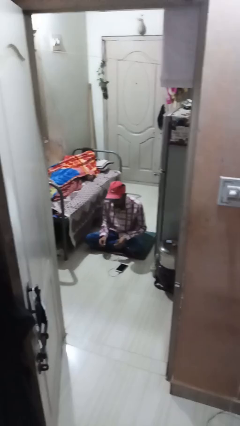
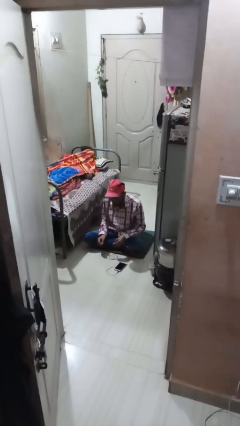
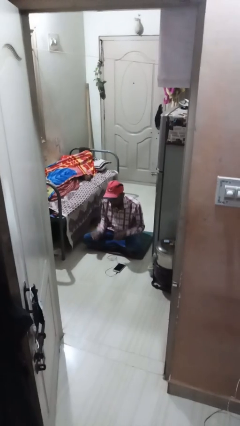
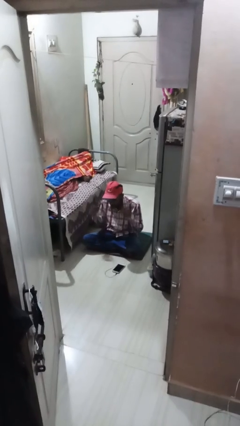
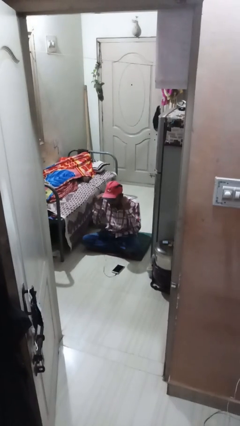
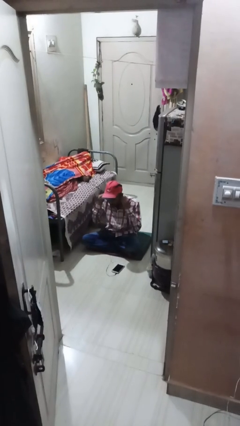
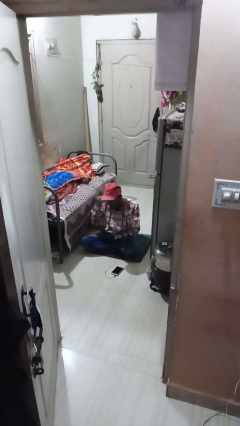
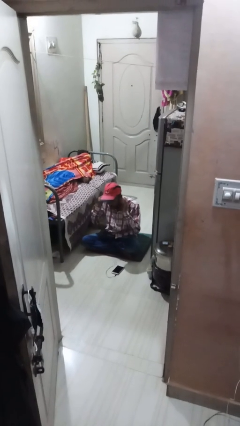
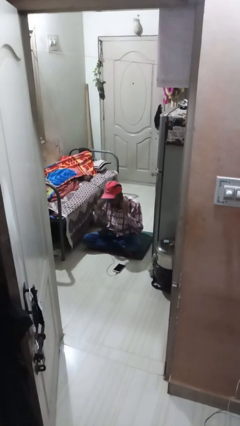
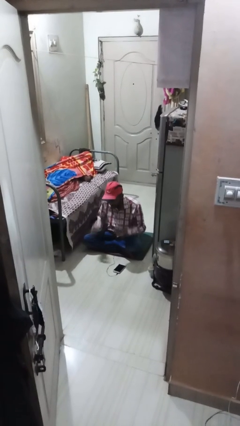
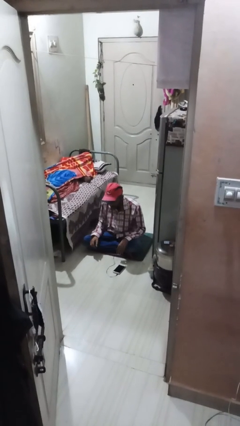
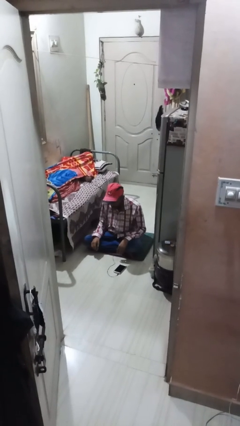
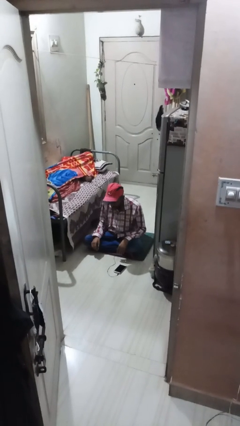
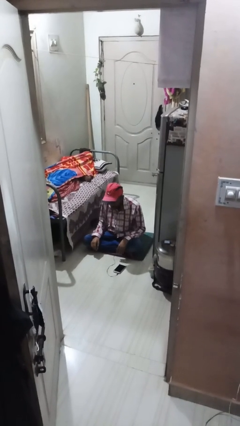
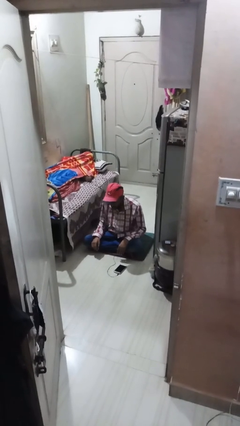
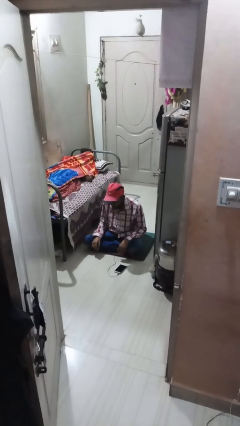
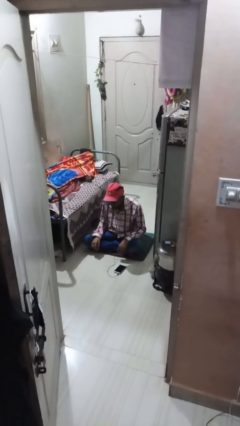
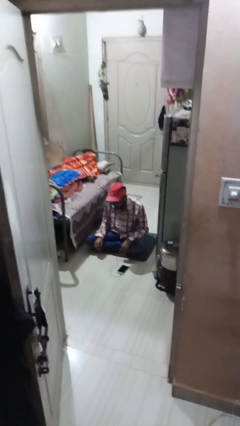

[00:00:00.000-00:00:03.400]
person puts on headphones

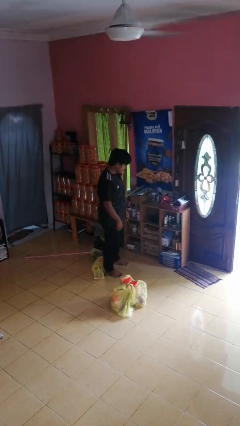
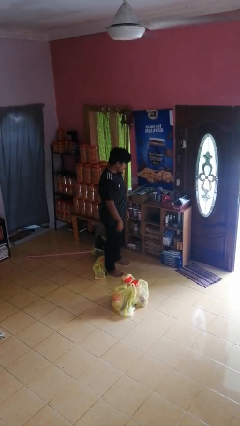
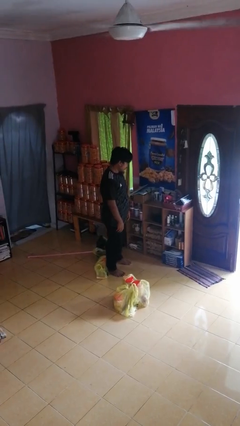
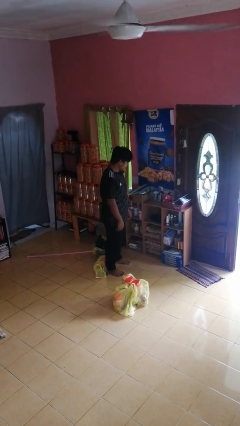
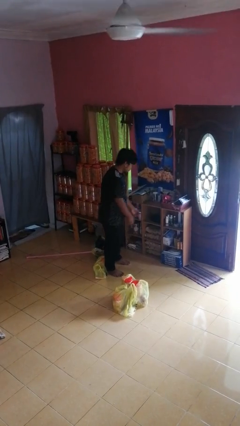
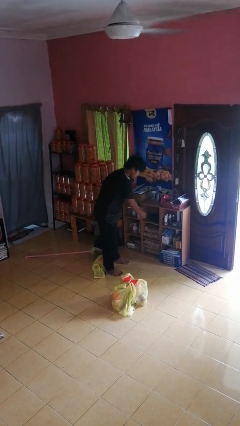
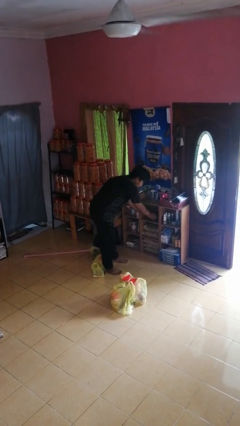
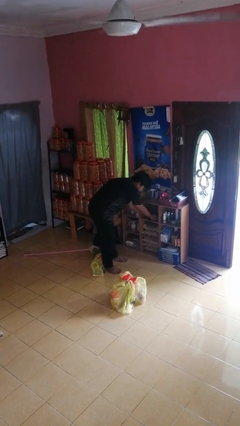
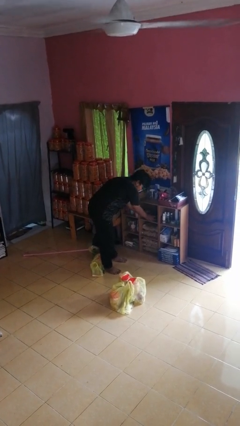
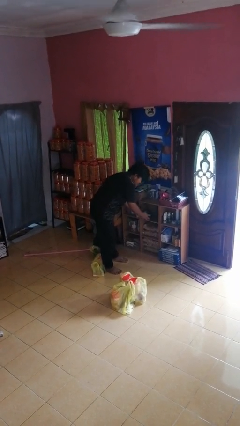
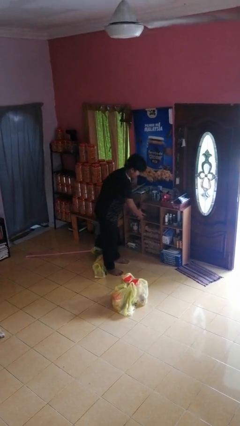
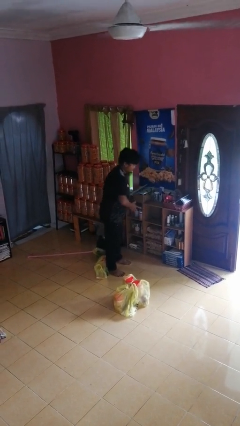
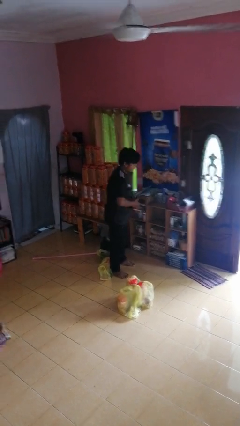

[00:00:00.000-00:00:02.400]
person takes object from cabinet

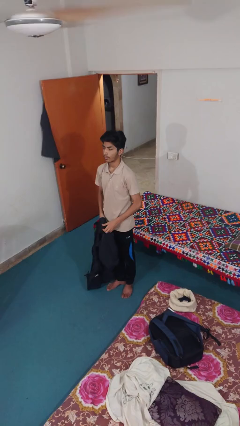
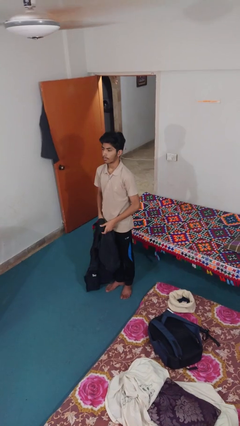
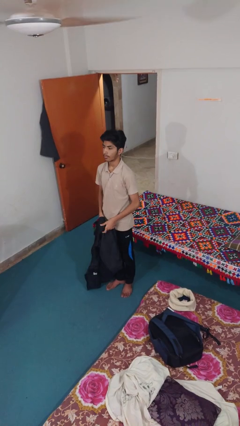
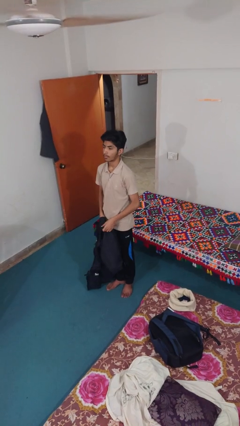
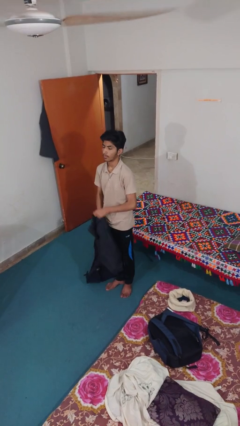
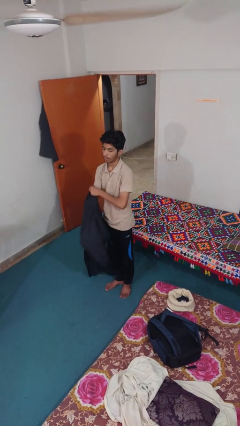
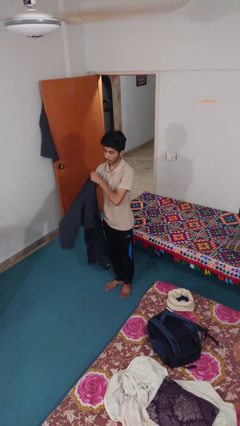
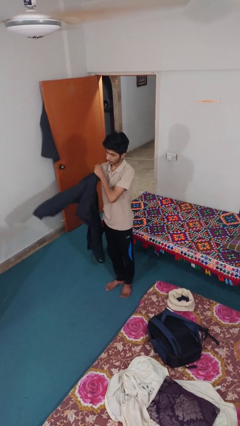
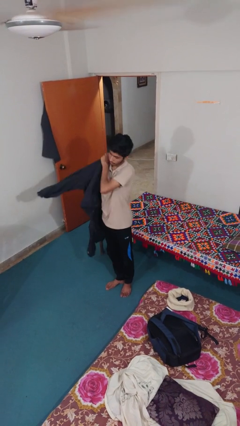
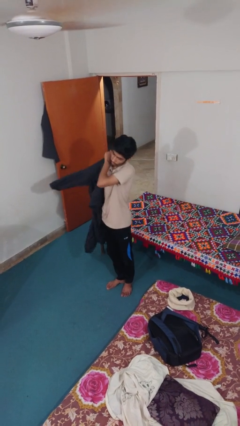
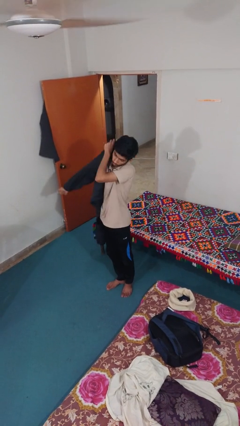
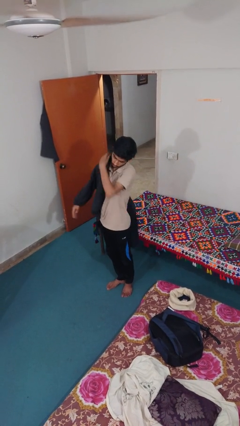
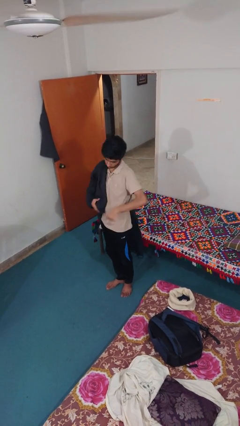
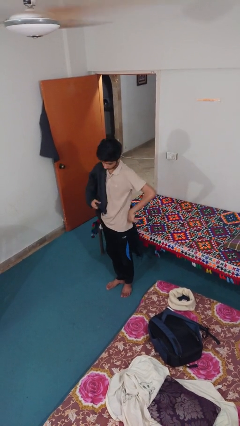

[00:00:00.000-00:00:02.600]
person puts on jacket

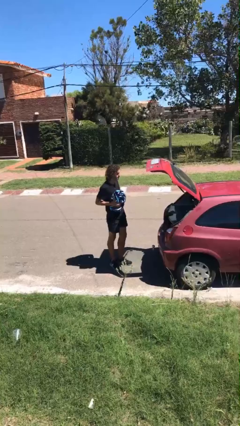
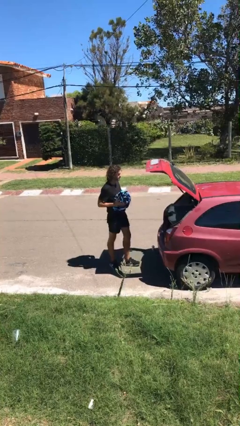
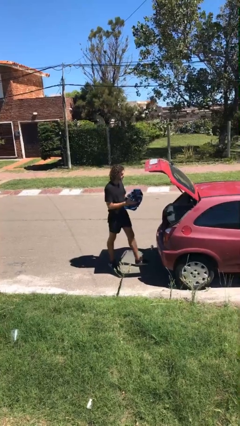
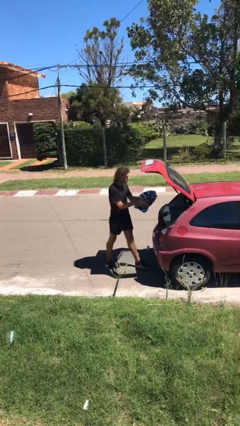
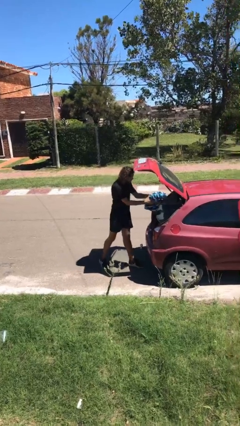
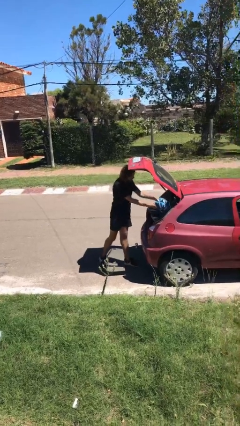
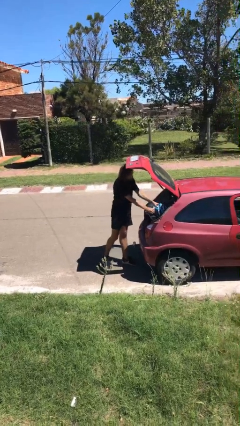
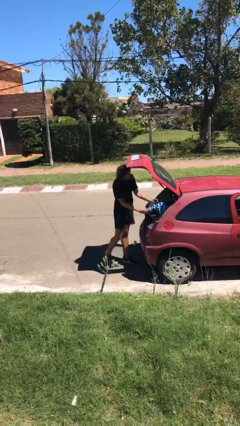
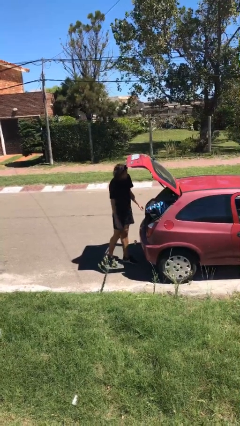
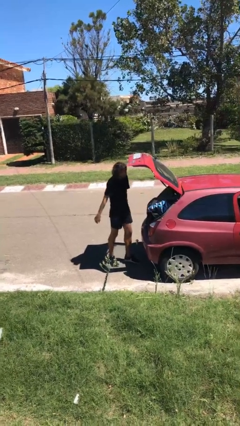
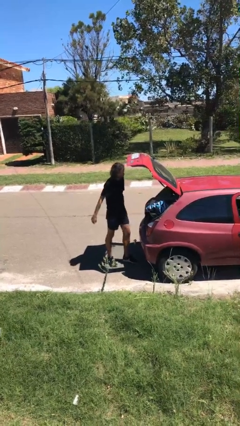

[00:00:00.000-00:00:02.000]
person loads car

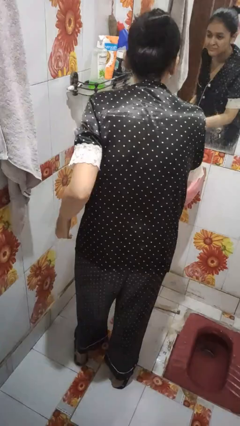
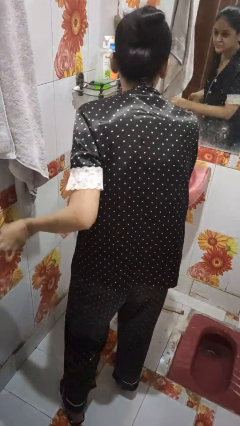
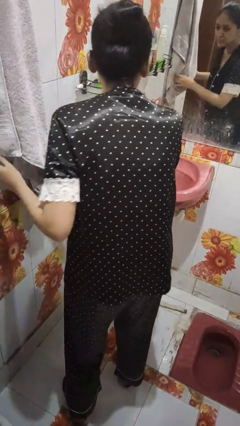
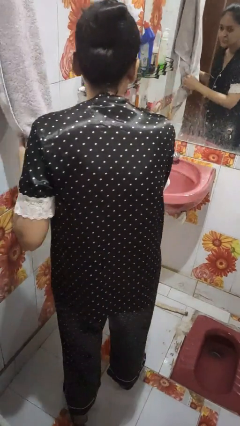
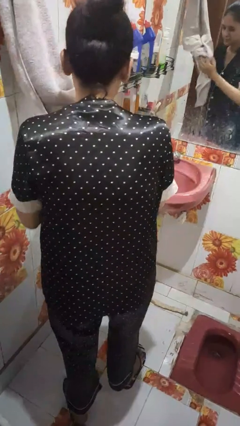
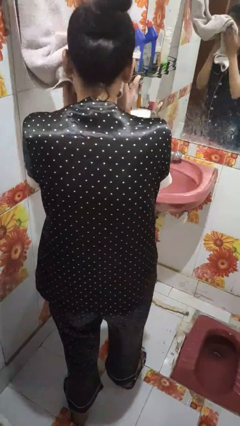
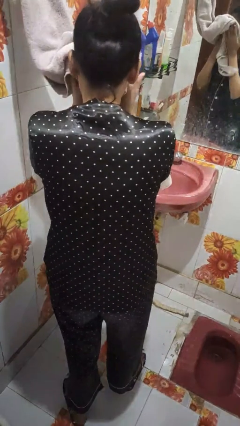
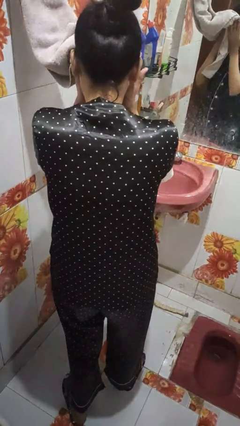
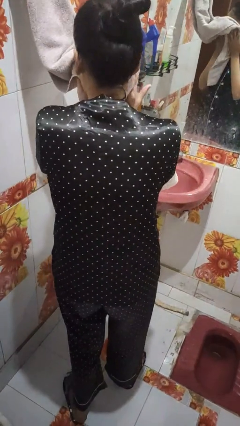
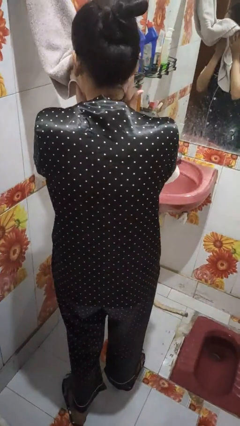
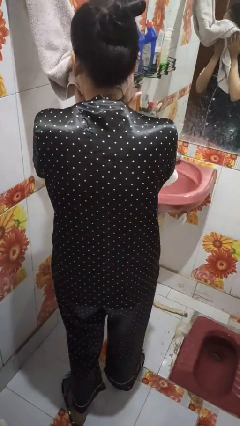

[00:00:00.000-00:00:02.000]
person dries face with towel

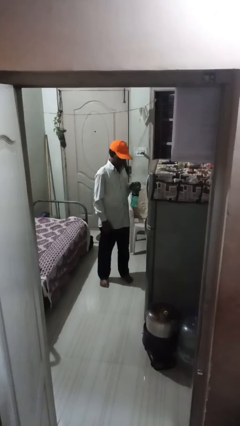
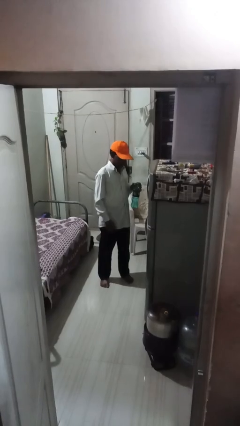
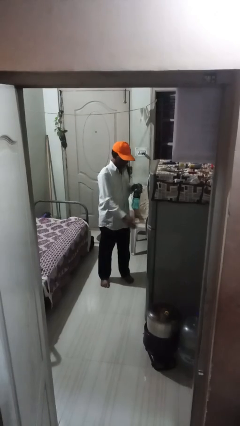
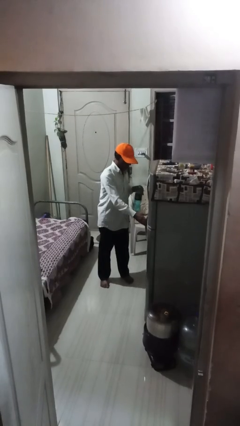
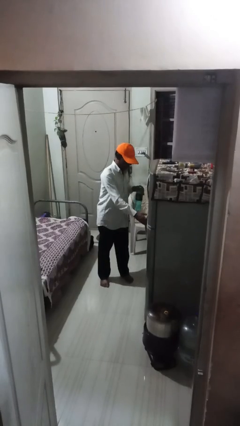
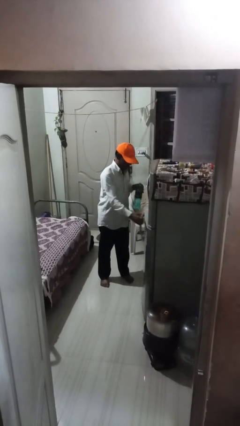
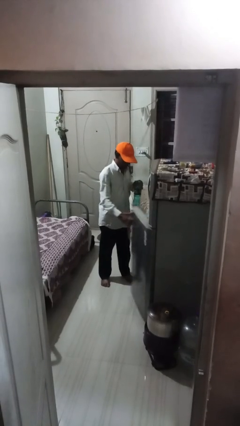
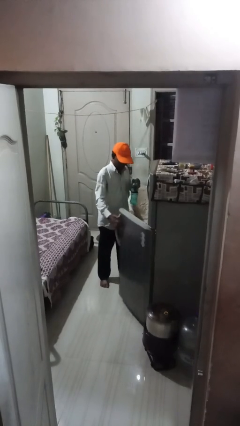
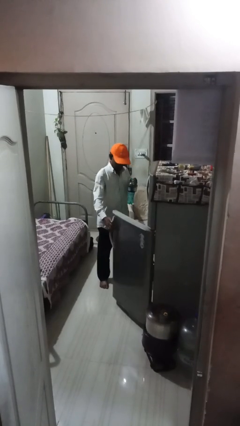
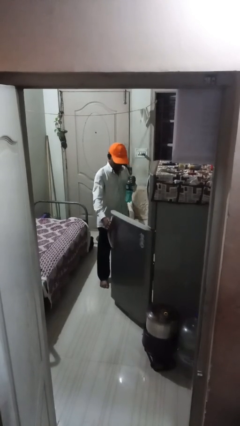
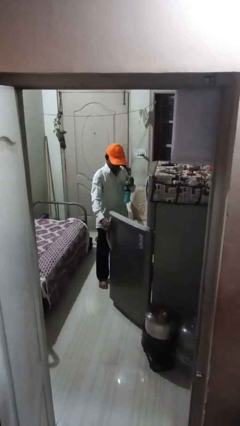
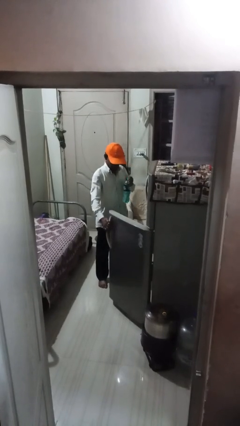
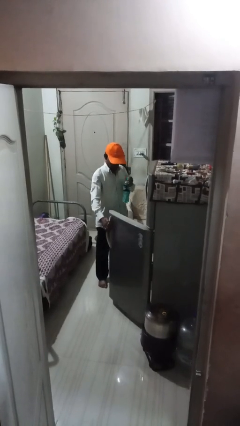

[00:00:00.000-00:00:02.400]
person opens refrigerator

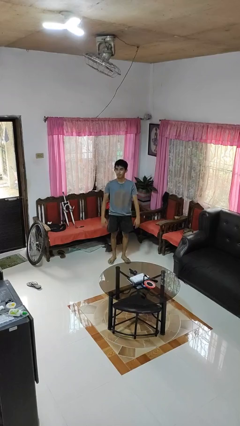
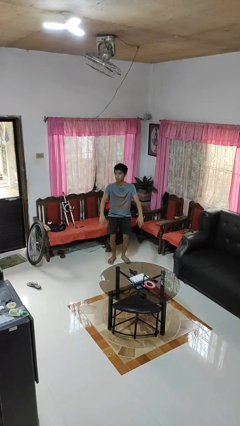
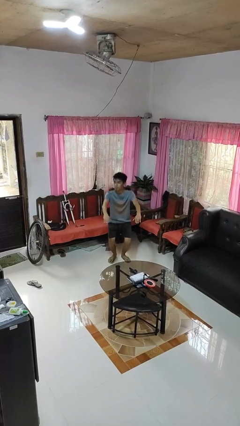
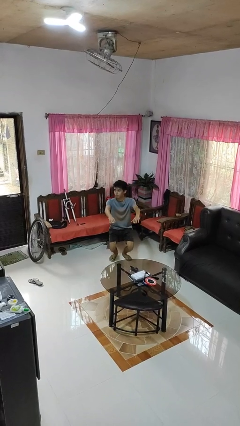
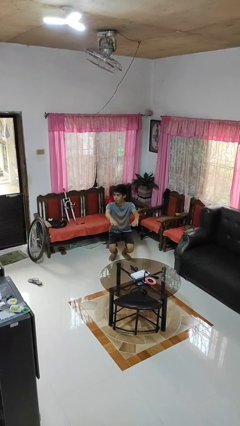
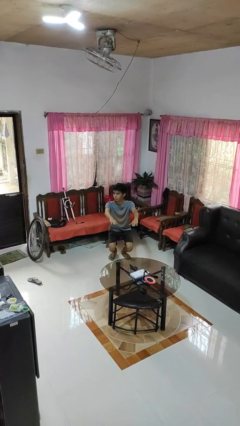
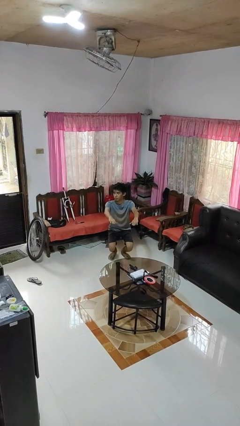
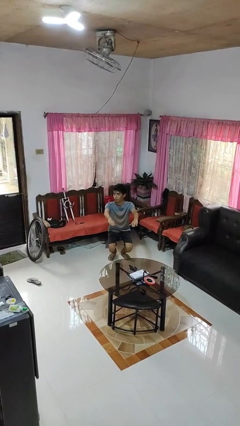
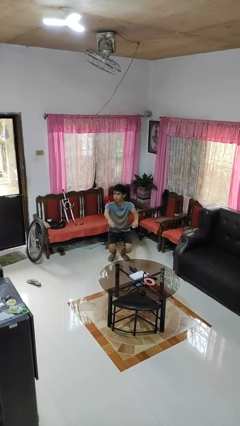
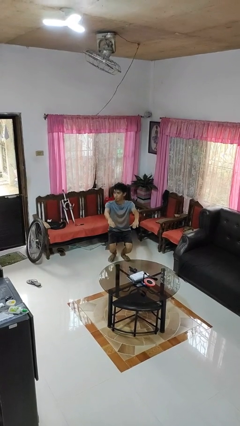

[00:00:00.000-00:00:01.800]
person squats
